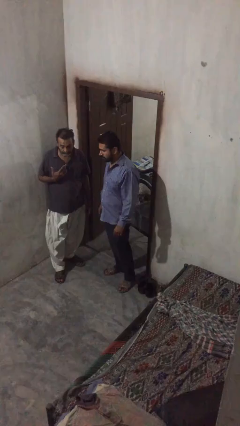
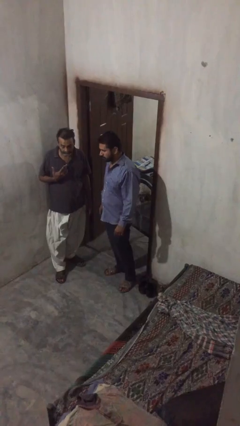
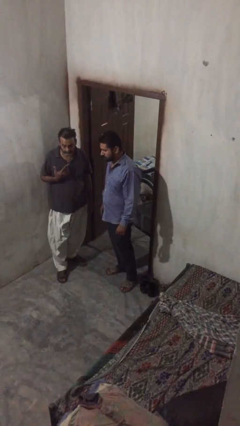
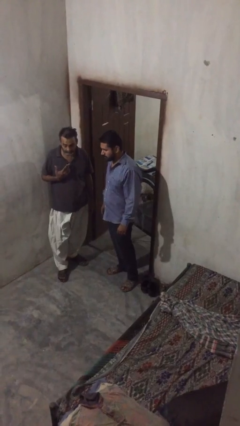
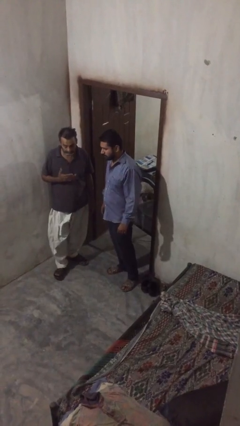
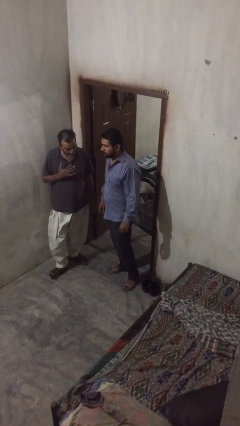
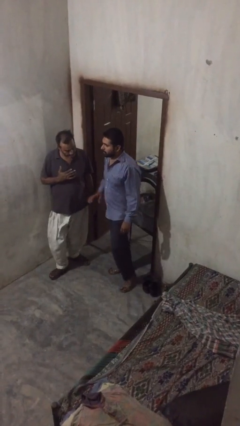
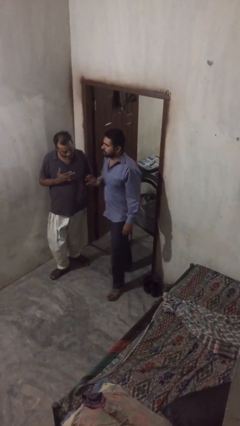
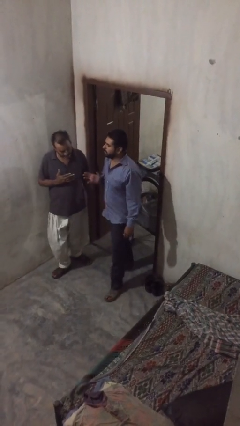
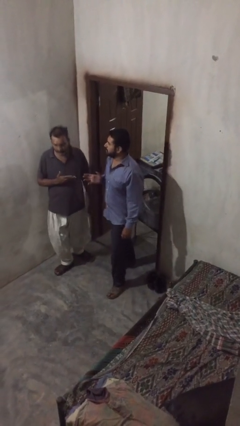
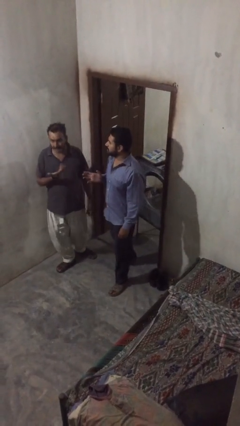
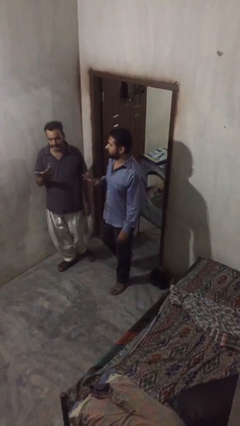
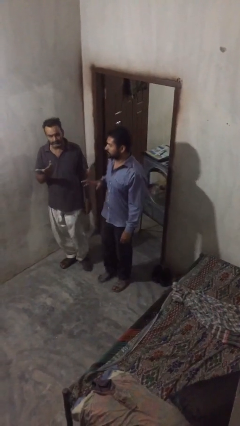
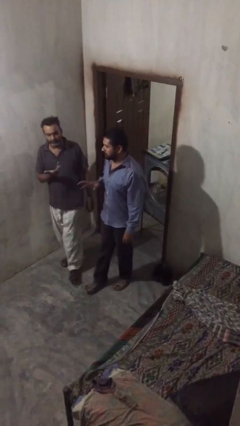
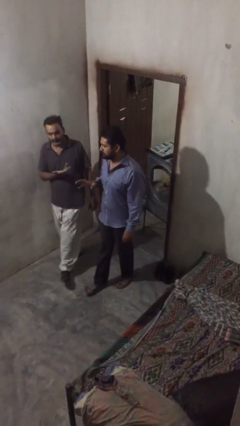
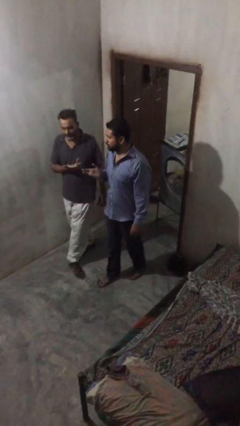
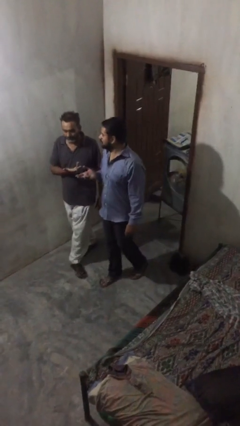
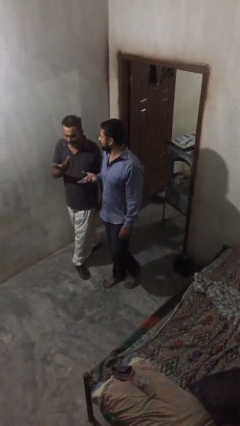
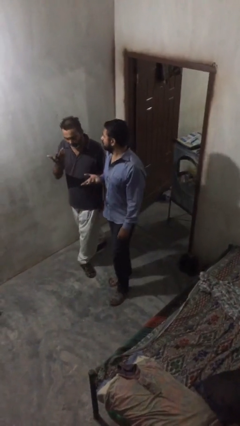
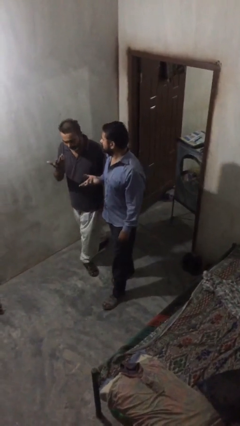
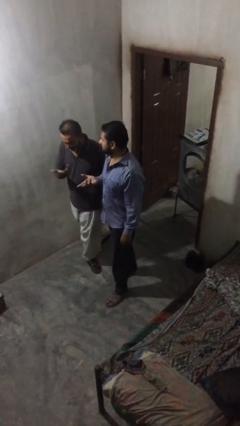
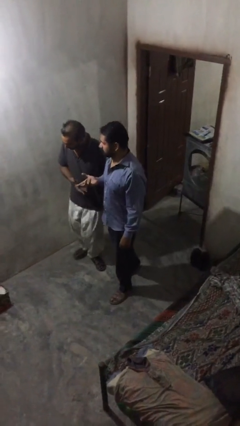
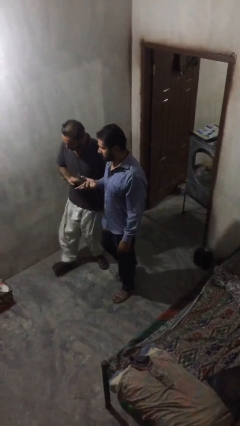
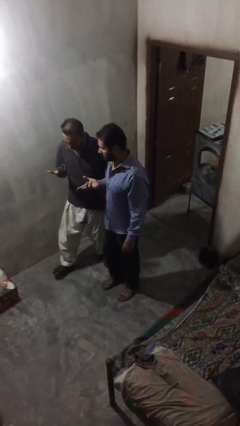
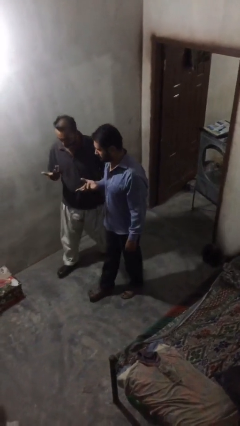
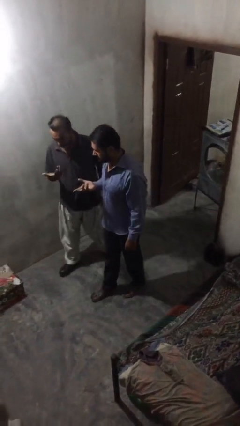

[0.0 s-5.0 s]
person talks to person

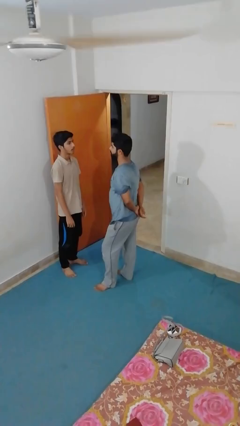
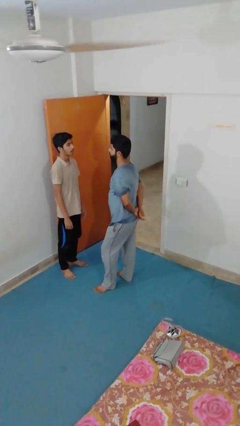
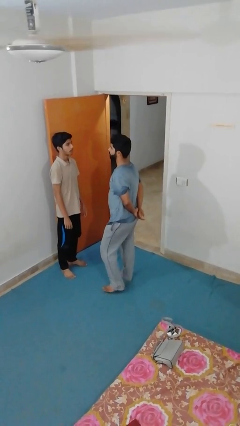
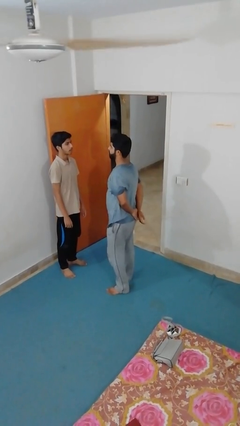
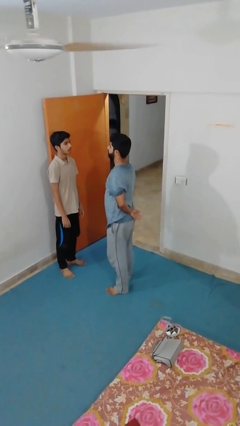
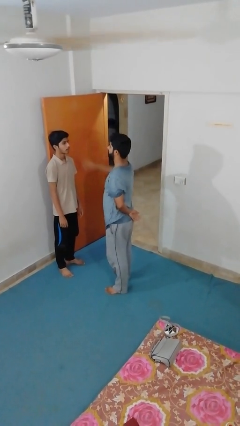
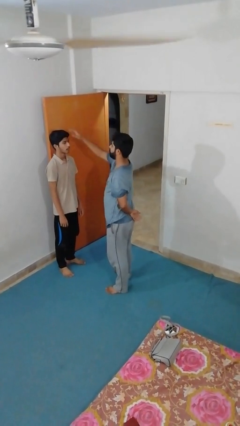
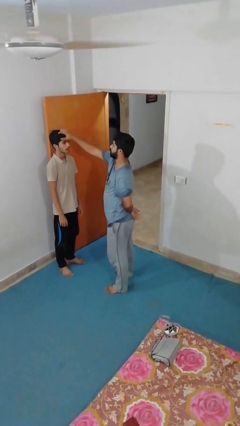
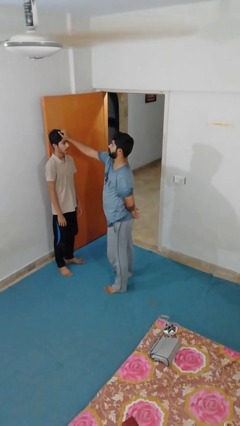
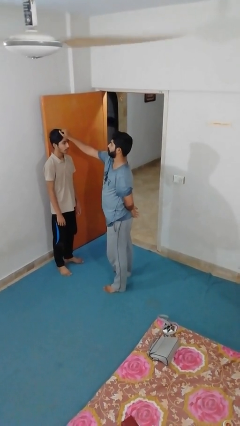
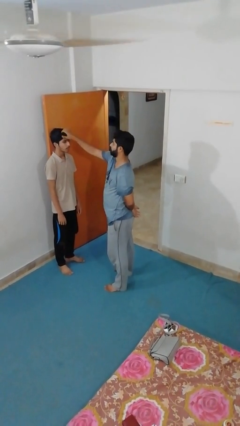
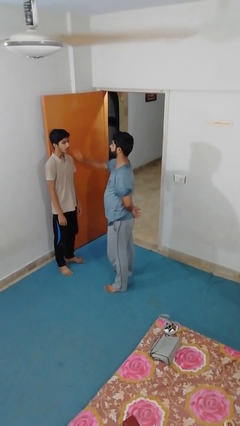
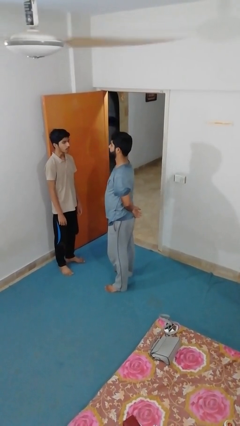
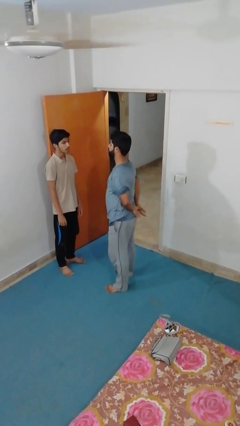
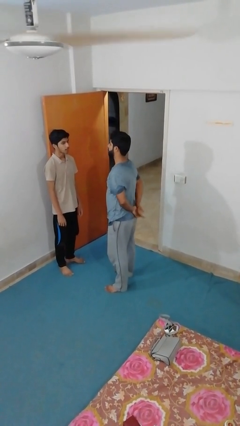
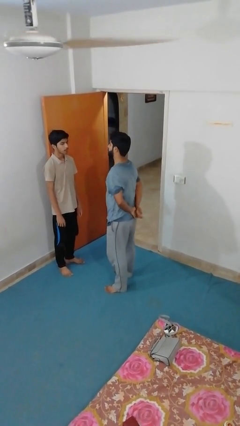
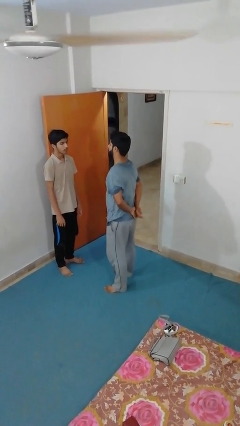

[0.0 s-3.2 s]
person grabs person by hair

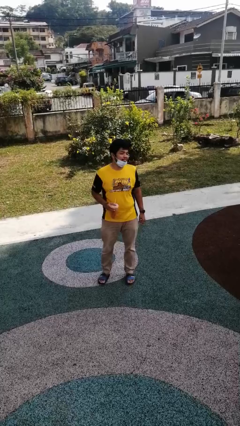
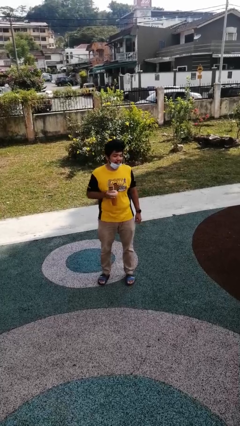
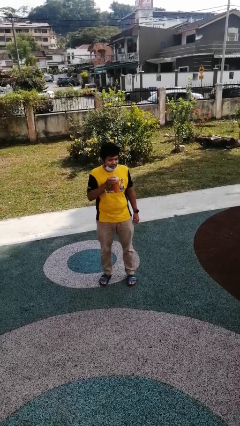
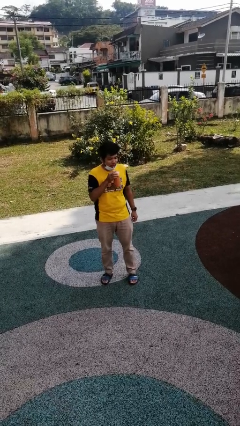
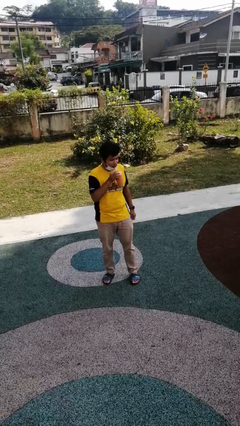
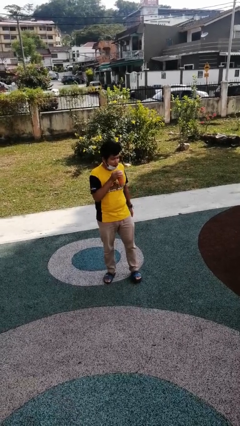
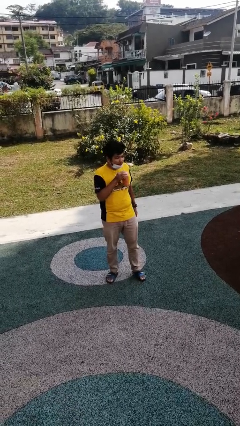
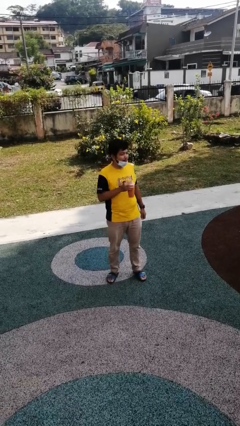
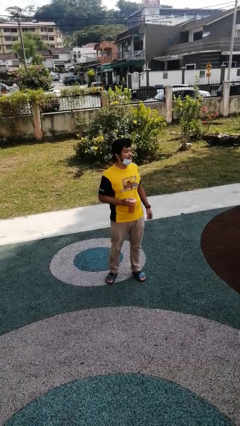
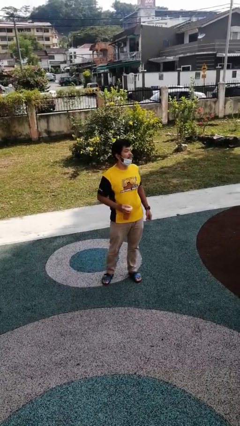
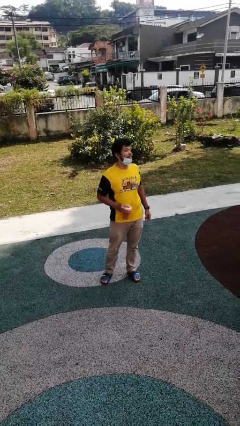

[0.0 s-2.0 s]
person drinks from straw

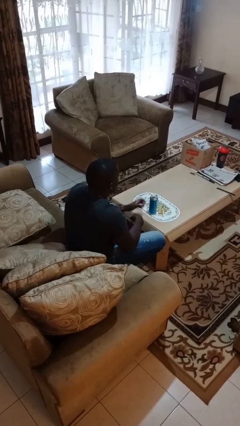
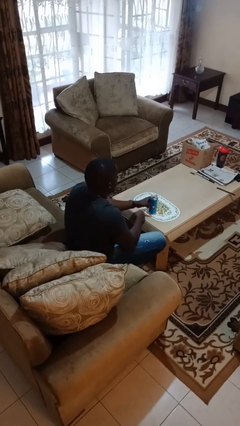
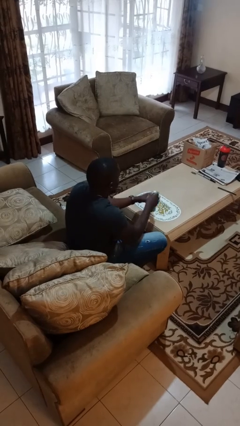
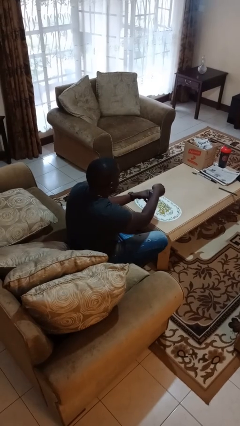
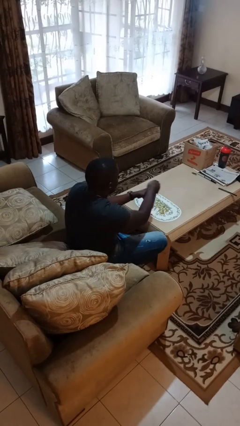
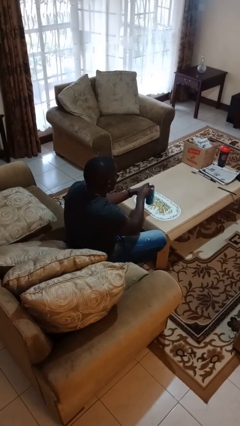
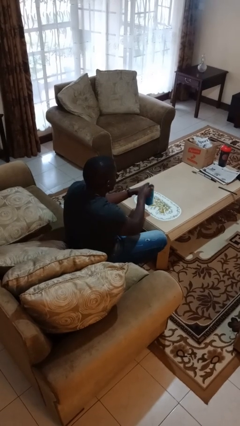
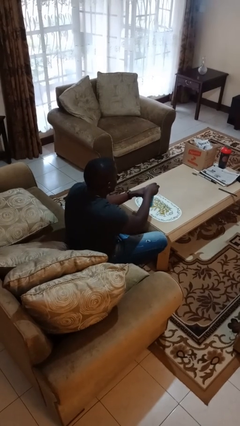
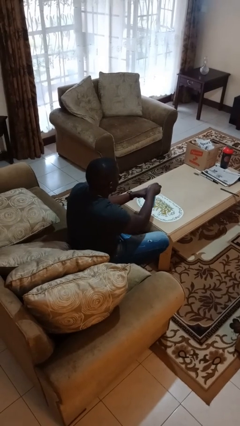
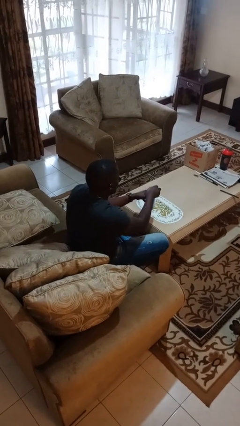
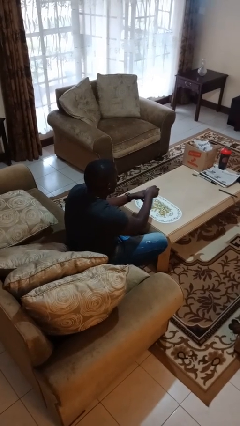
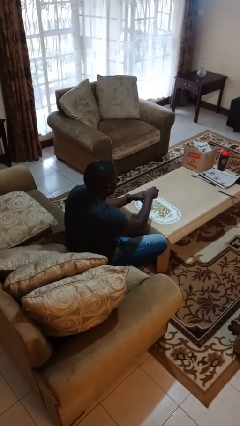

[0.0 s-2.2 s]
person opens beverage can

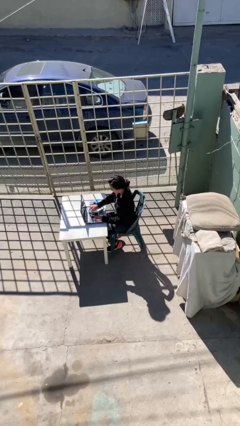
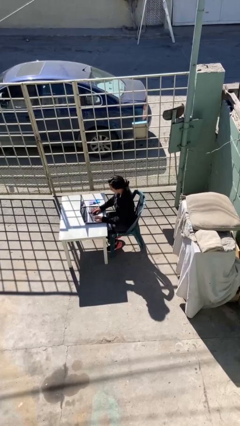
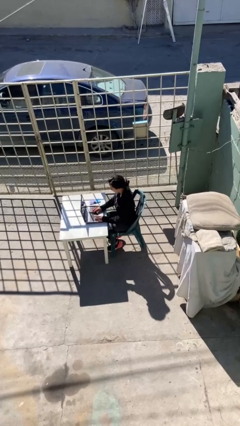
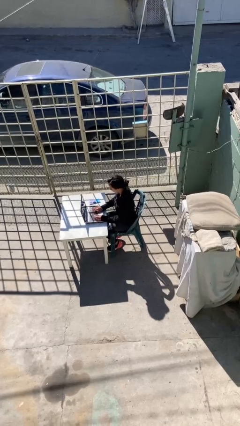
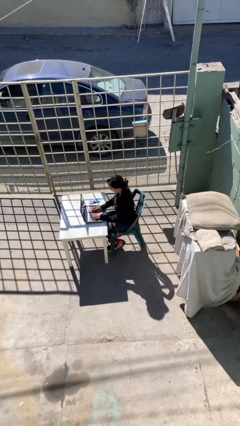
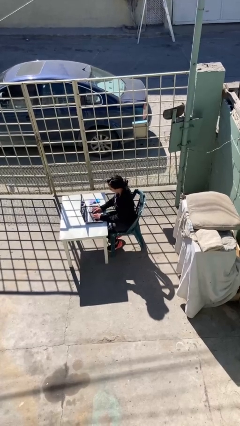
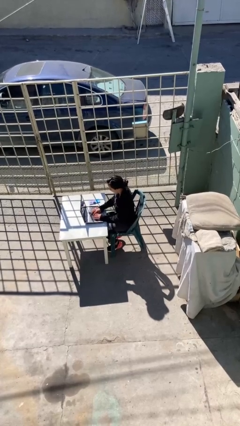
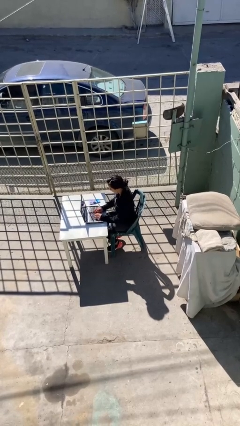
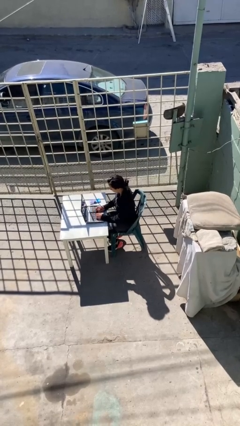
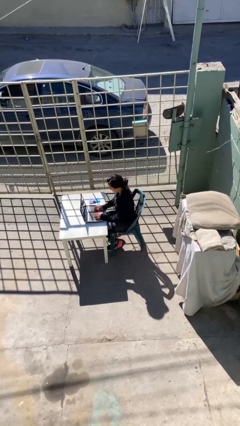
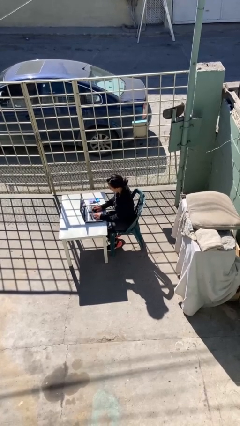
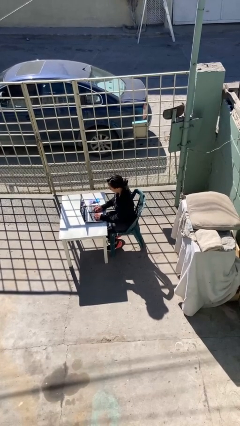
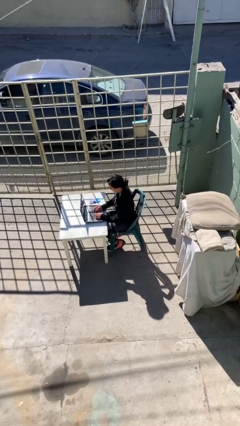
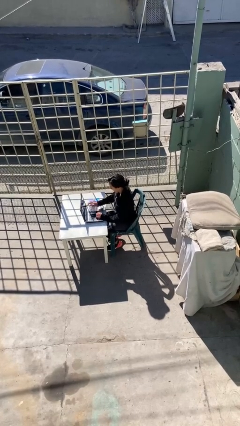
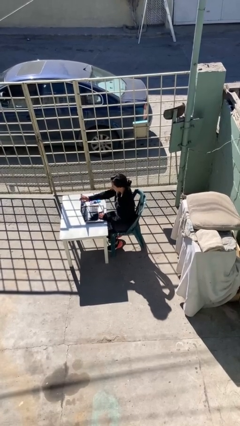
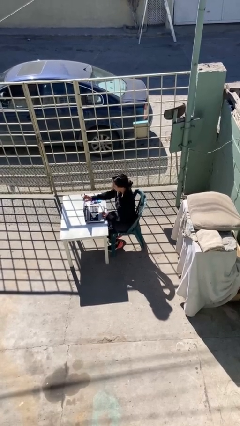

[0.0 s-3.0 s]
person interacts with laptop

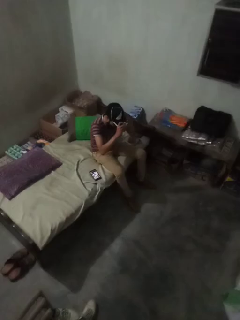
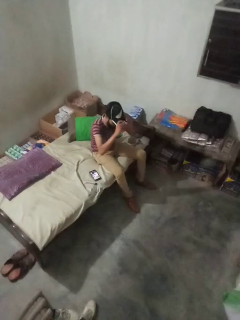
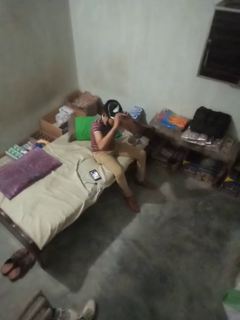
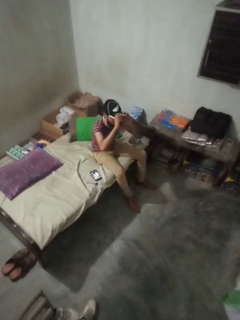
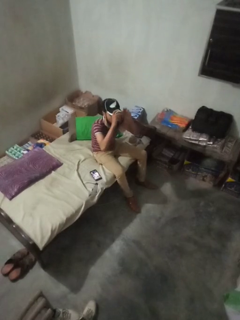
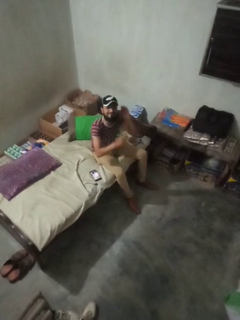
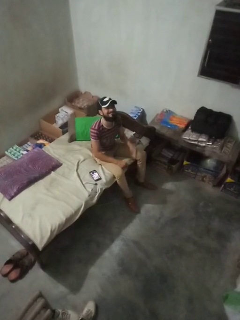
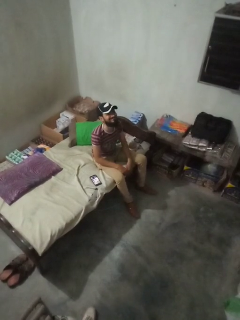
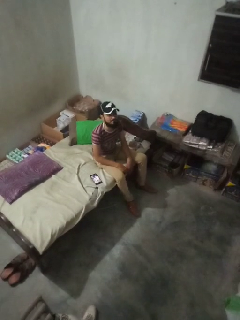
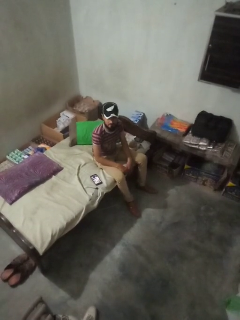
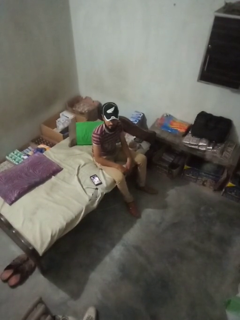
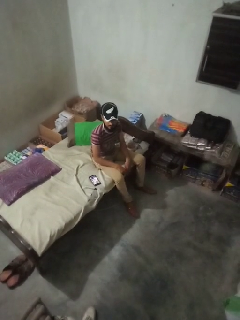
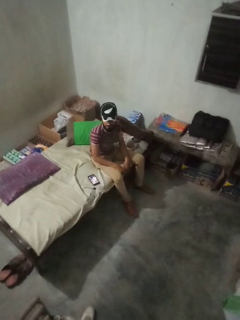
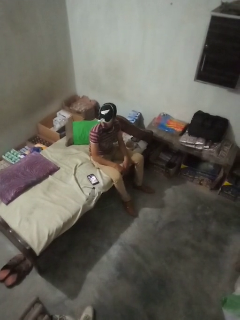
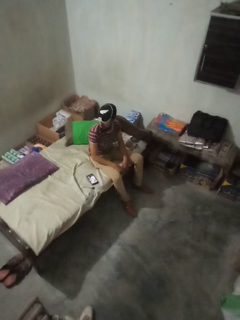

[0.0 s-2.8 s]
person puts on hat
